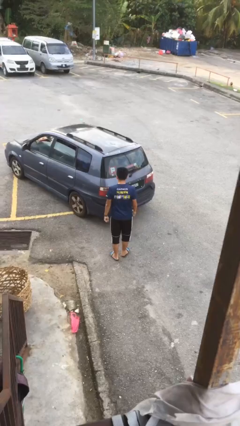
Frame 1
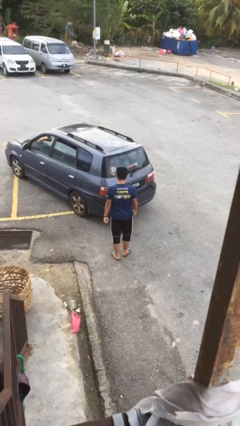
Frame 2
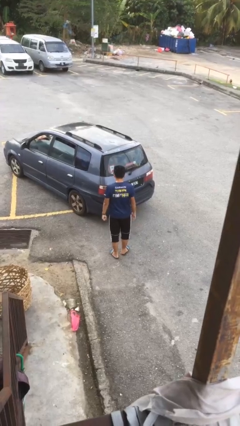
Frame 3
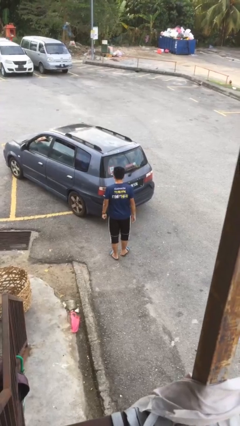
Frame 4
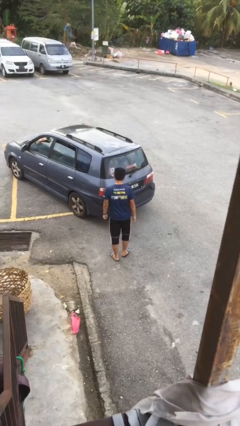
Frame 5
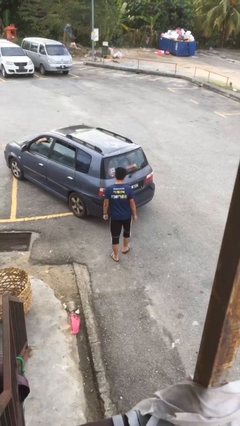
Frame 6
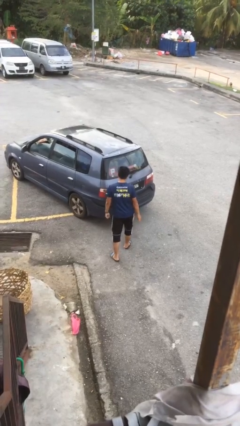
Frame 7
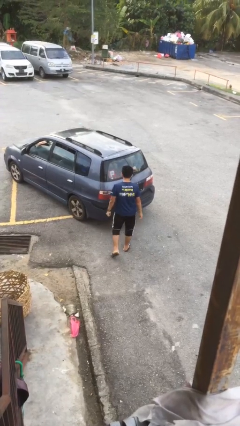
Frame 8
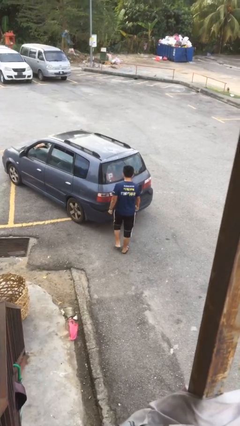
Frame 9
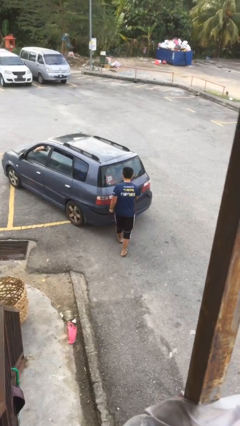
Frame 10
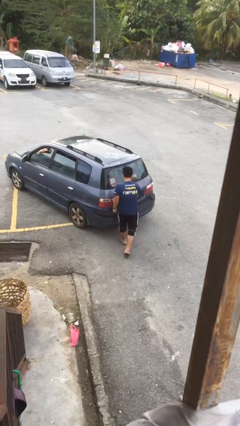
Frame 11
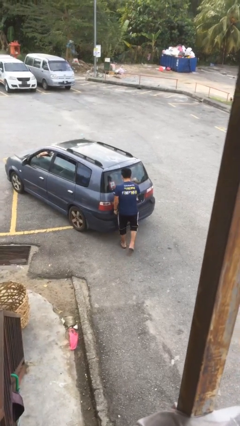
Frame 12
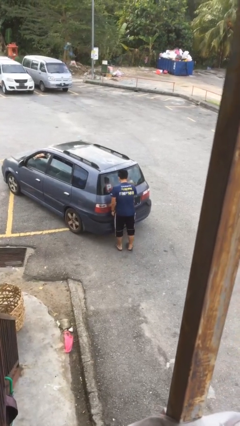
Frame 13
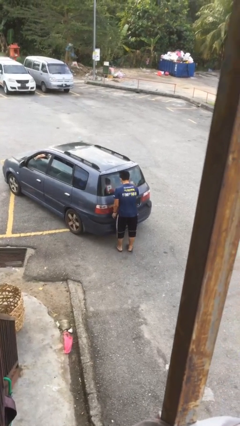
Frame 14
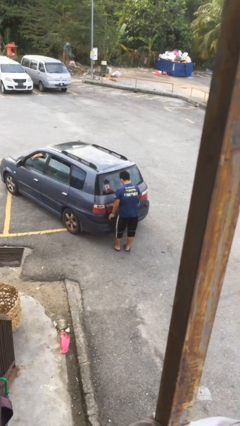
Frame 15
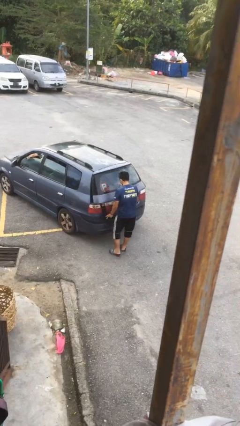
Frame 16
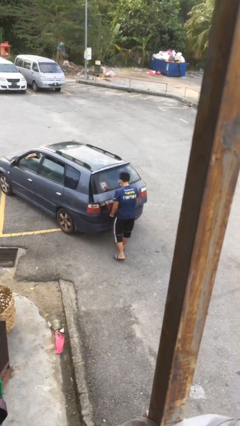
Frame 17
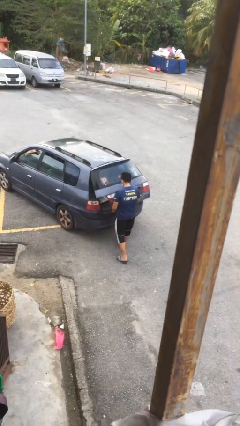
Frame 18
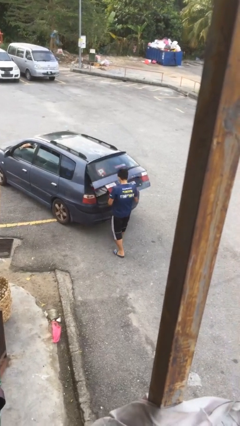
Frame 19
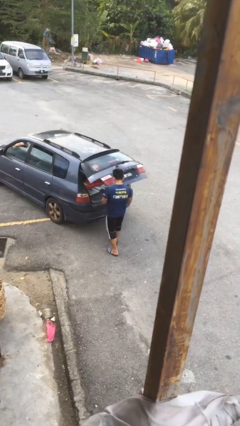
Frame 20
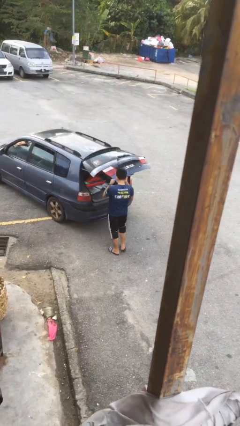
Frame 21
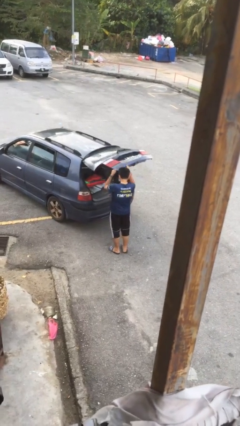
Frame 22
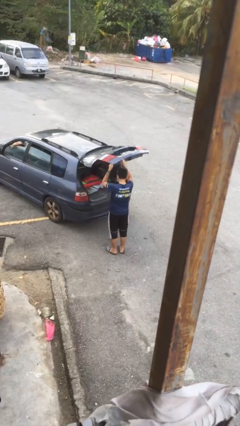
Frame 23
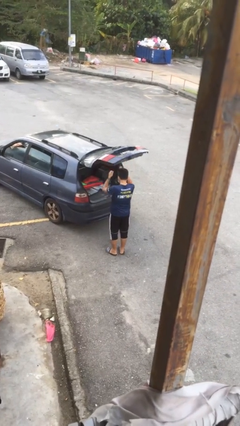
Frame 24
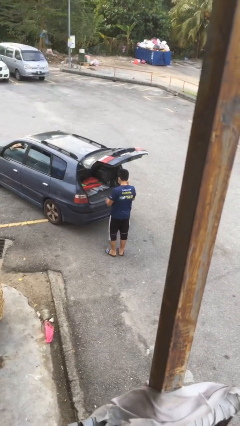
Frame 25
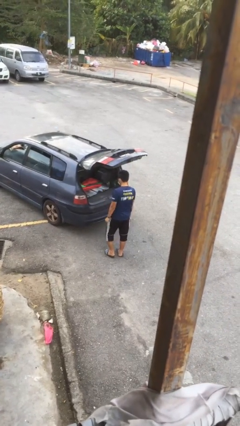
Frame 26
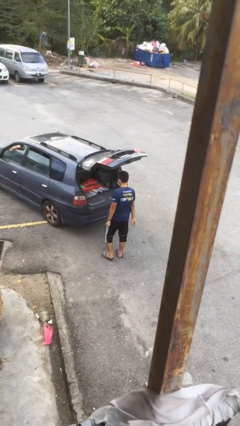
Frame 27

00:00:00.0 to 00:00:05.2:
person opens car trunk

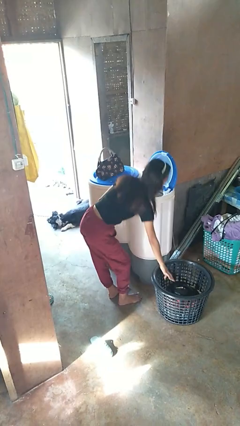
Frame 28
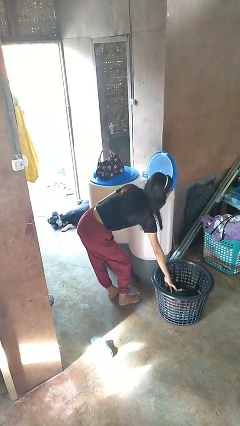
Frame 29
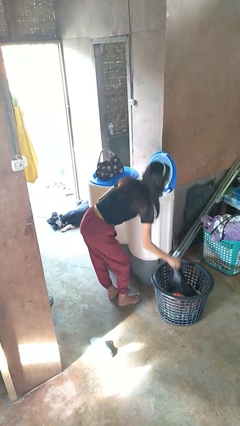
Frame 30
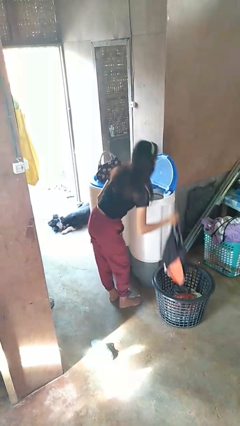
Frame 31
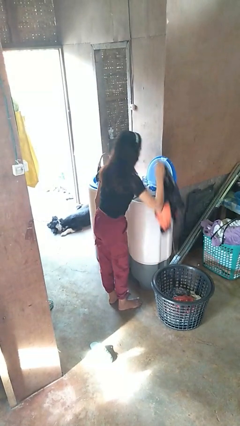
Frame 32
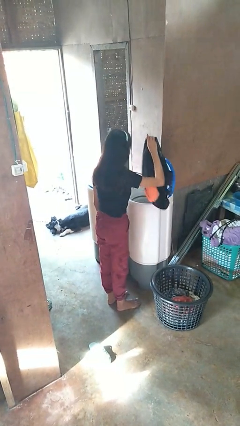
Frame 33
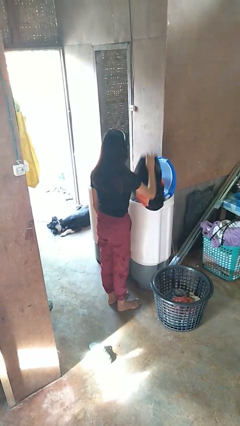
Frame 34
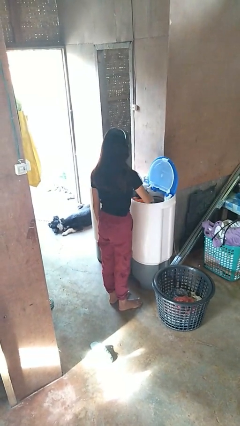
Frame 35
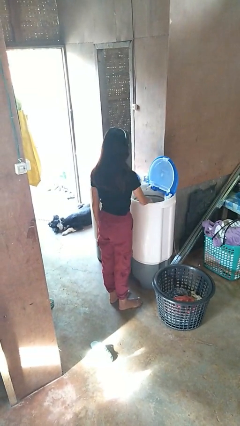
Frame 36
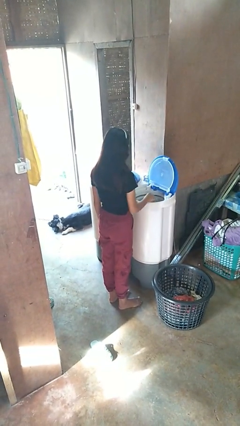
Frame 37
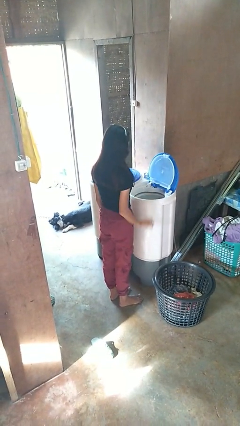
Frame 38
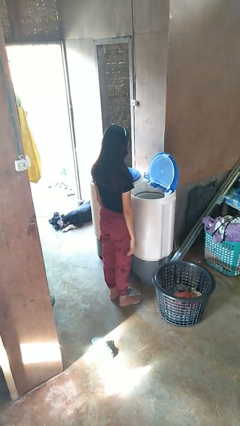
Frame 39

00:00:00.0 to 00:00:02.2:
person loads clotheswasher

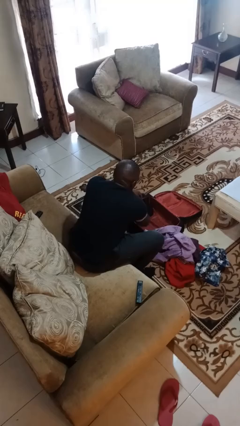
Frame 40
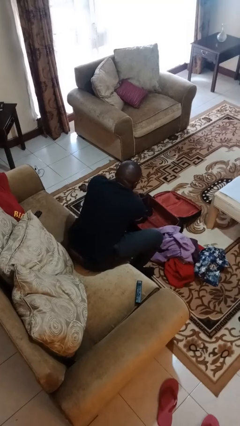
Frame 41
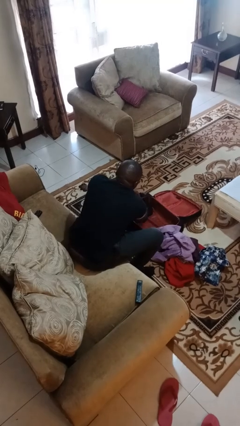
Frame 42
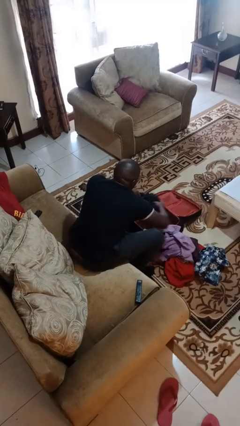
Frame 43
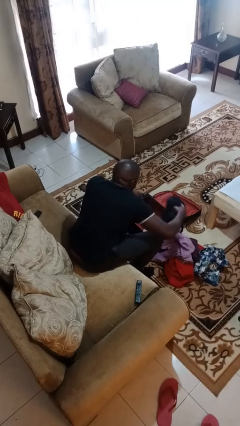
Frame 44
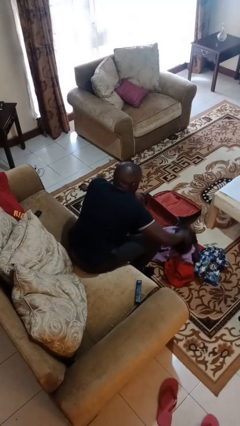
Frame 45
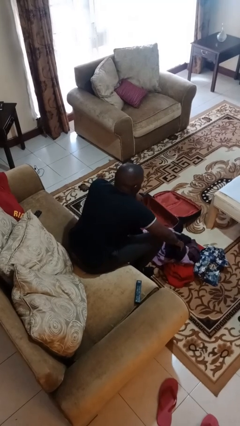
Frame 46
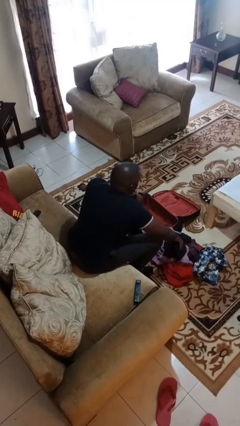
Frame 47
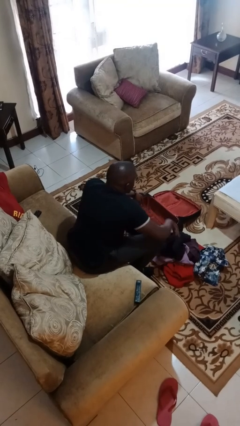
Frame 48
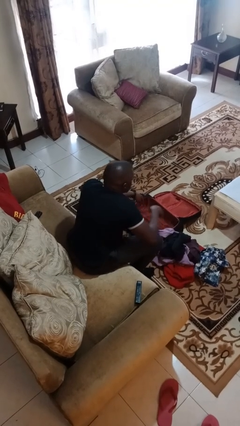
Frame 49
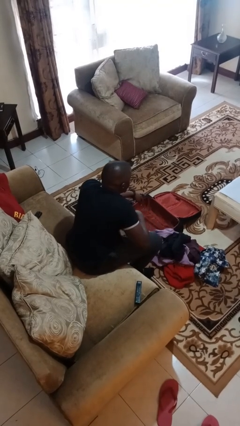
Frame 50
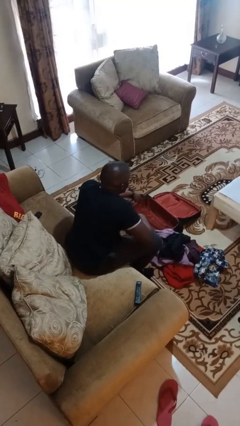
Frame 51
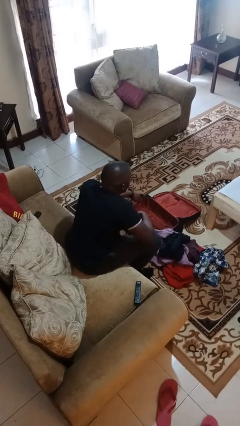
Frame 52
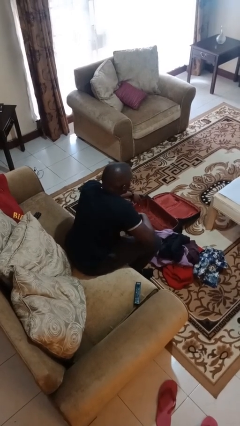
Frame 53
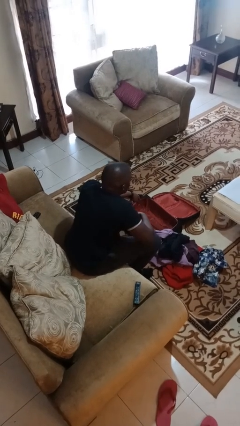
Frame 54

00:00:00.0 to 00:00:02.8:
person unloads clothes from suitcase

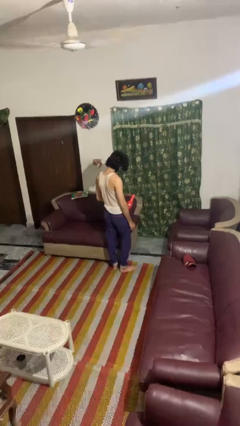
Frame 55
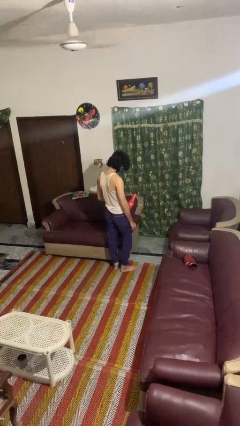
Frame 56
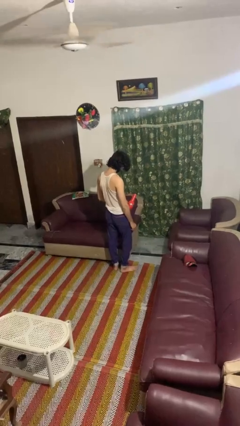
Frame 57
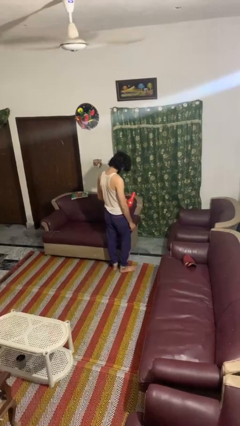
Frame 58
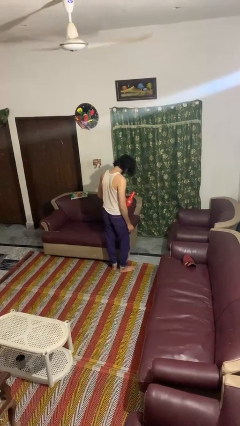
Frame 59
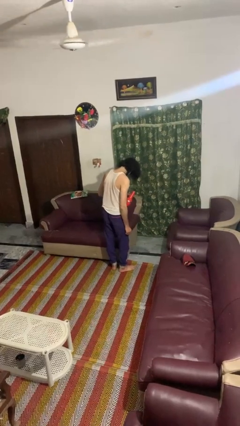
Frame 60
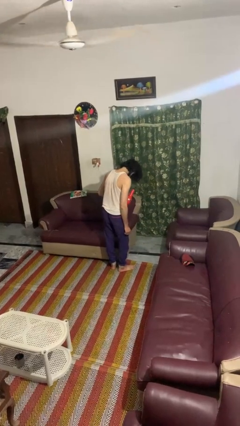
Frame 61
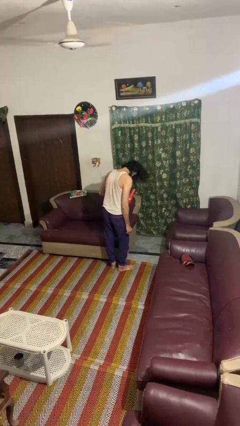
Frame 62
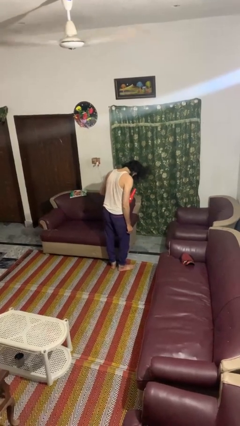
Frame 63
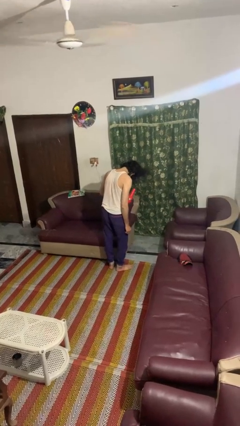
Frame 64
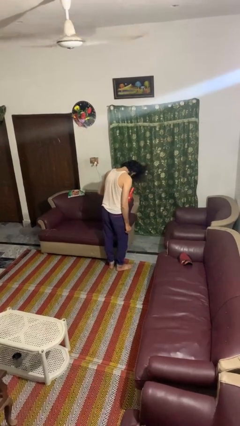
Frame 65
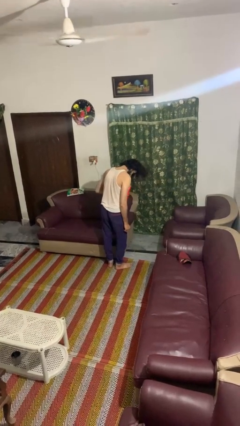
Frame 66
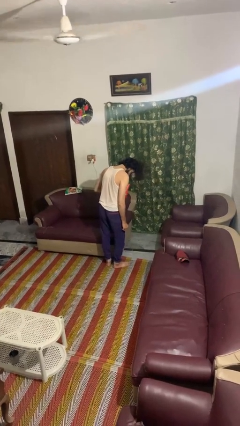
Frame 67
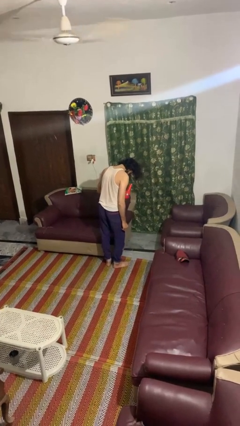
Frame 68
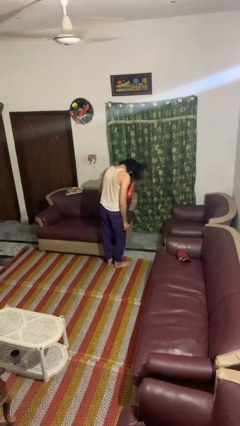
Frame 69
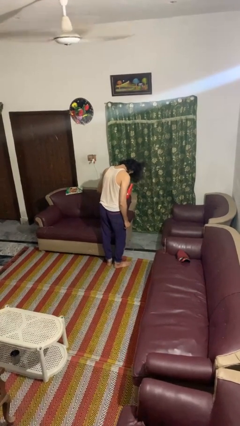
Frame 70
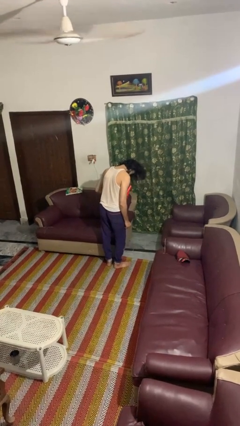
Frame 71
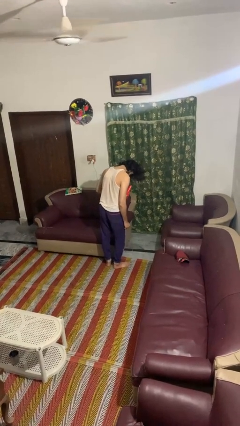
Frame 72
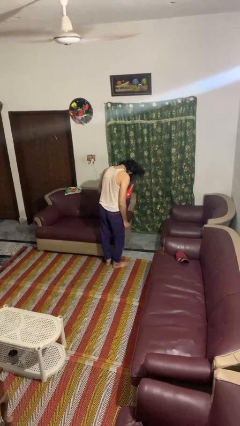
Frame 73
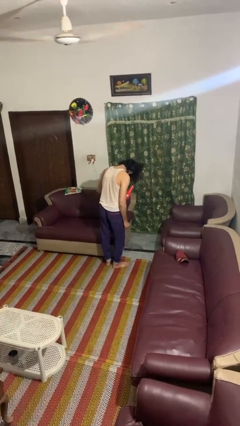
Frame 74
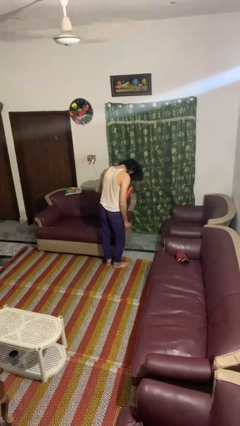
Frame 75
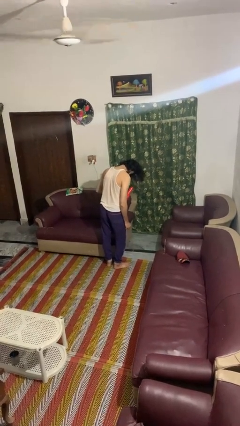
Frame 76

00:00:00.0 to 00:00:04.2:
person dries hair with hairdryer

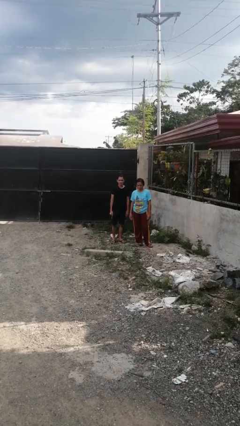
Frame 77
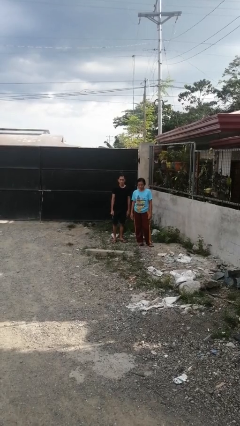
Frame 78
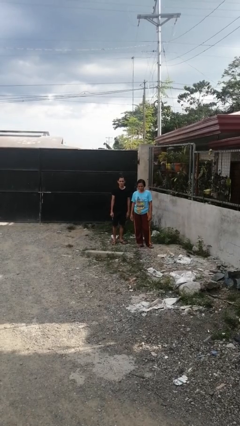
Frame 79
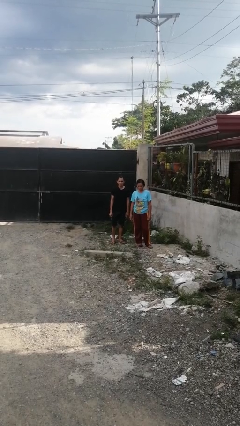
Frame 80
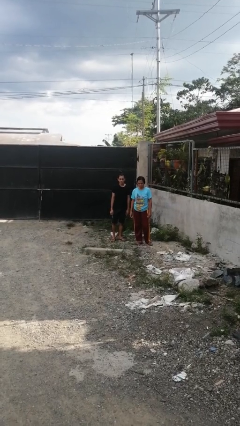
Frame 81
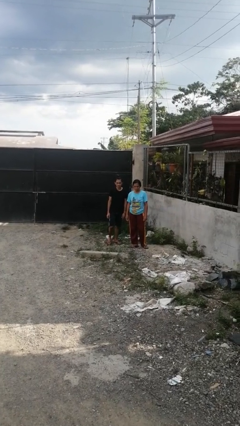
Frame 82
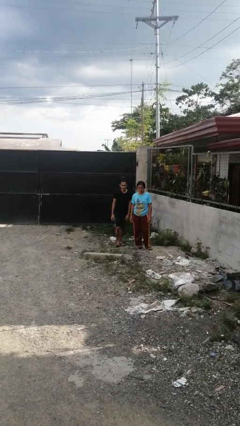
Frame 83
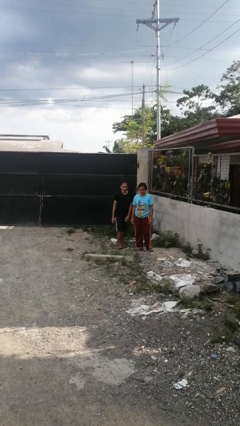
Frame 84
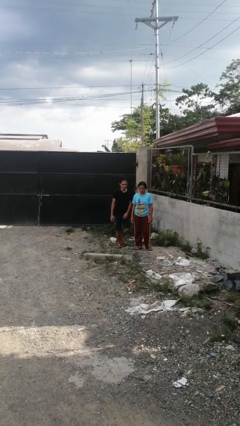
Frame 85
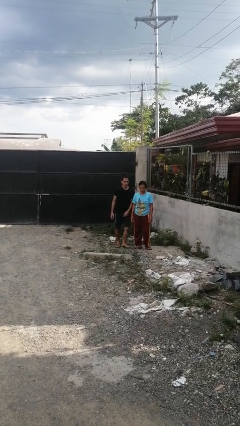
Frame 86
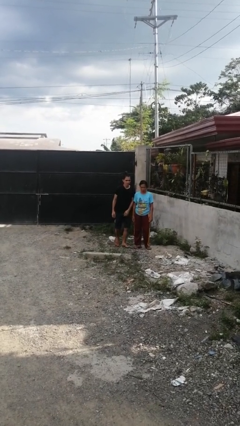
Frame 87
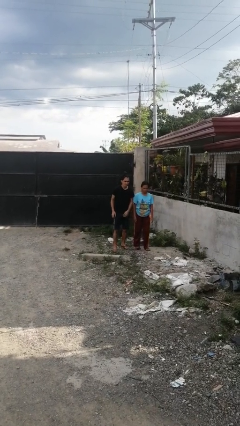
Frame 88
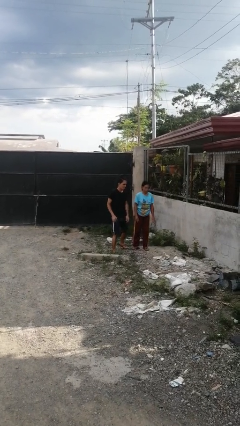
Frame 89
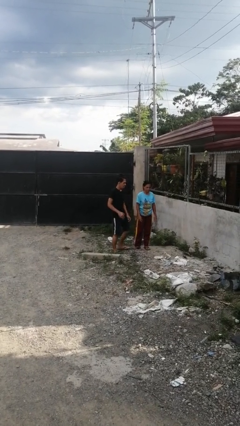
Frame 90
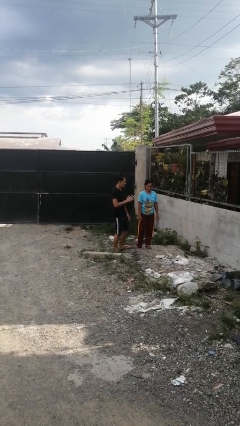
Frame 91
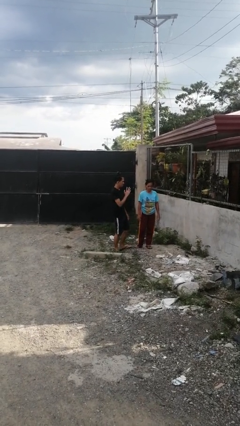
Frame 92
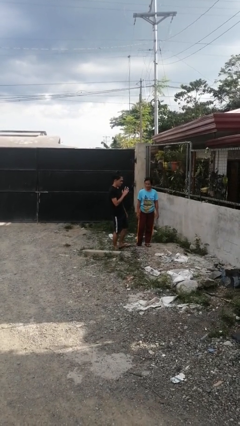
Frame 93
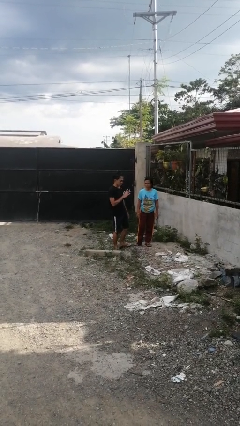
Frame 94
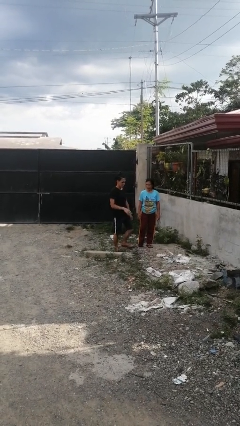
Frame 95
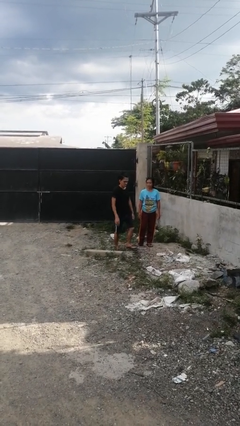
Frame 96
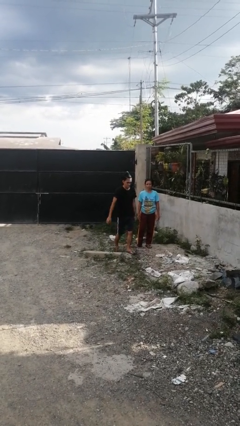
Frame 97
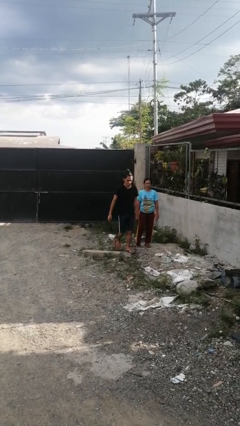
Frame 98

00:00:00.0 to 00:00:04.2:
person bumps into person
